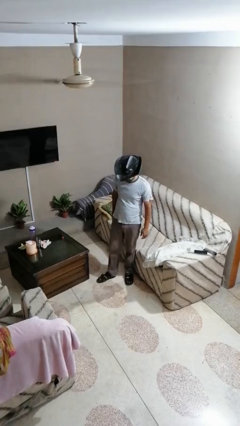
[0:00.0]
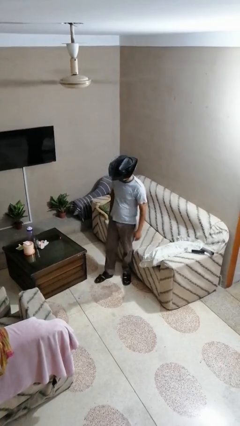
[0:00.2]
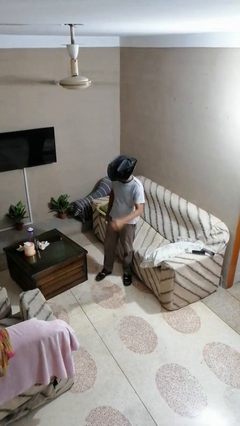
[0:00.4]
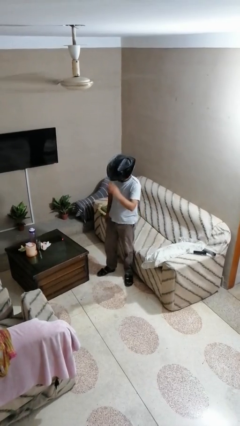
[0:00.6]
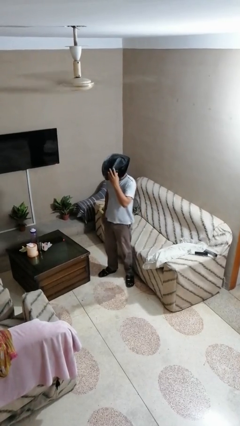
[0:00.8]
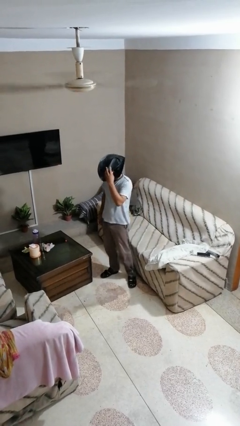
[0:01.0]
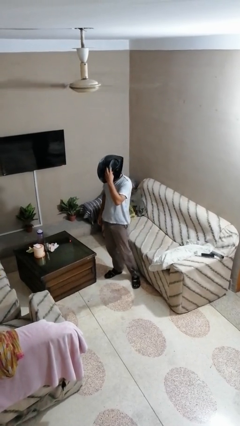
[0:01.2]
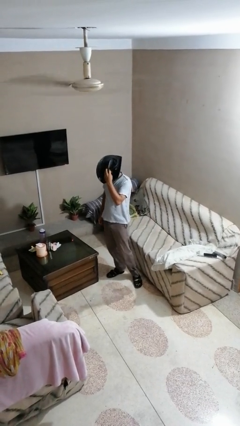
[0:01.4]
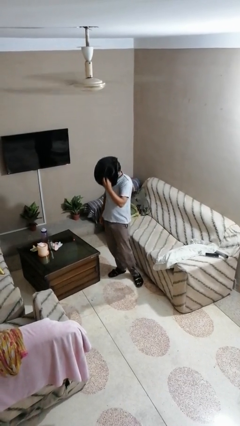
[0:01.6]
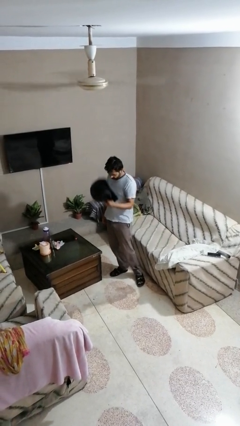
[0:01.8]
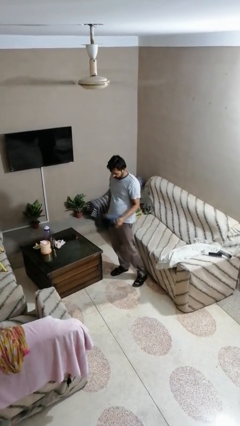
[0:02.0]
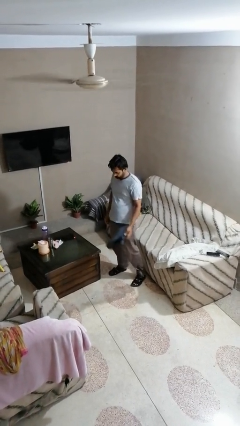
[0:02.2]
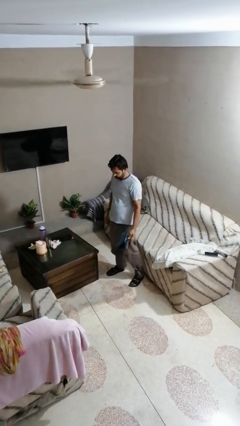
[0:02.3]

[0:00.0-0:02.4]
person takes off hat

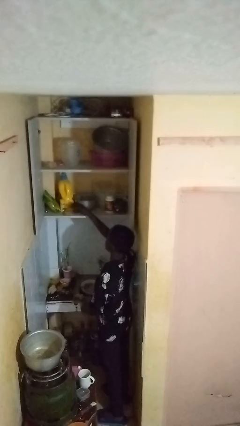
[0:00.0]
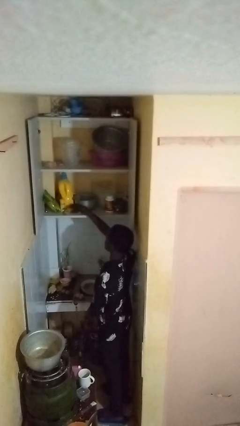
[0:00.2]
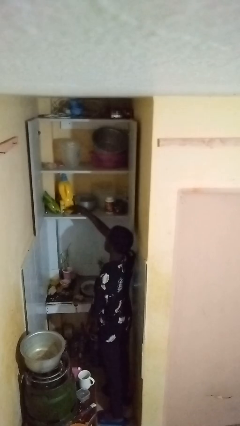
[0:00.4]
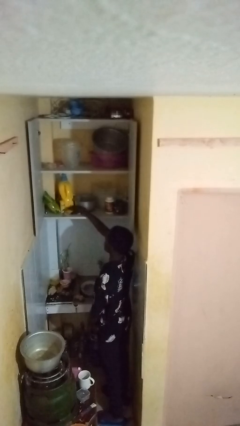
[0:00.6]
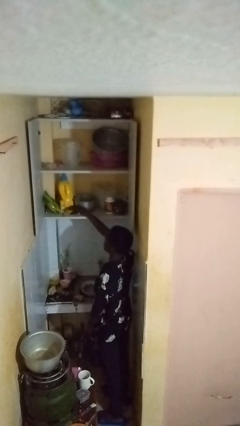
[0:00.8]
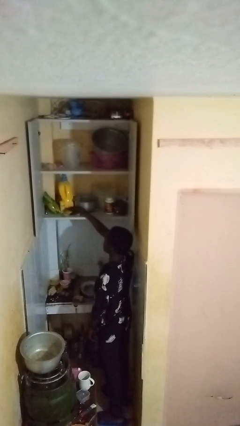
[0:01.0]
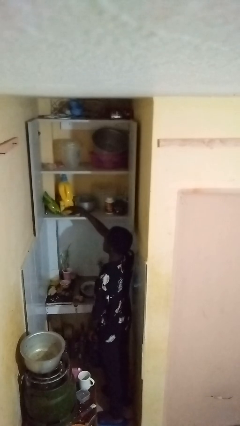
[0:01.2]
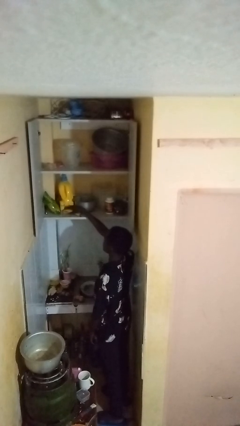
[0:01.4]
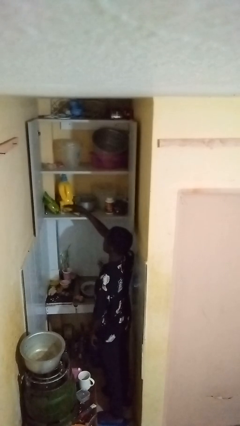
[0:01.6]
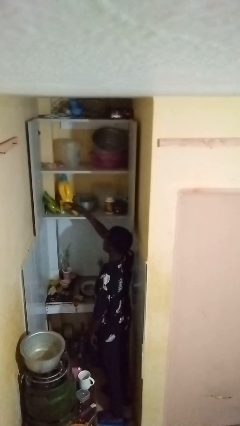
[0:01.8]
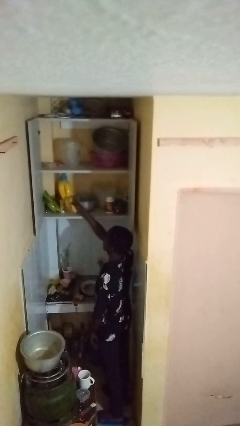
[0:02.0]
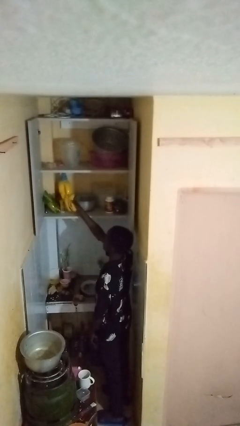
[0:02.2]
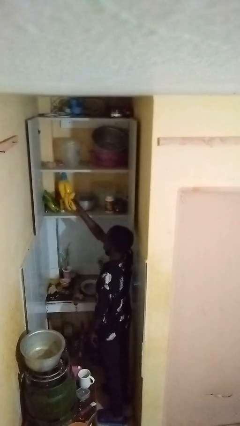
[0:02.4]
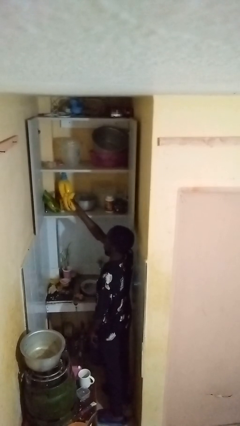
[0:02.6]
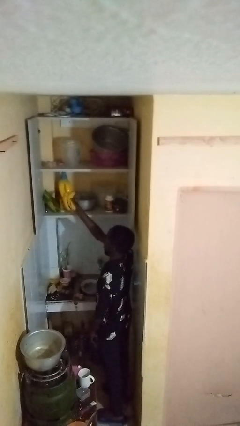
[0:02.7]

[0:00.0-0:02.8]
person takes object from cabinet

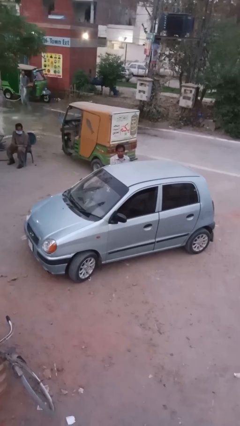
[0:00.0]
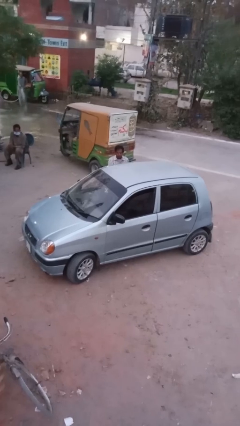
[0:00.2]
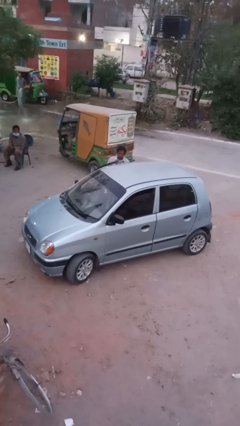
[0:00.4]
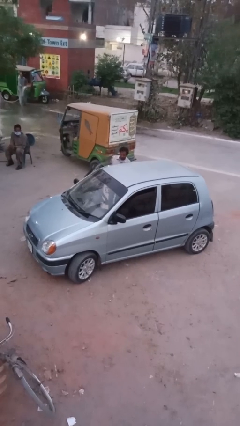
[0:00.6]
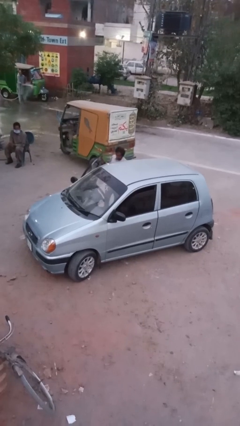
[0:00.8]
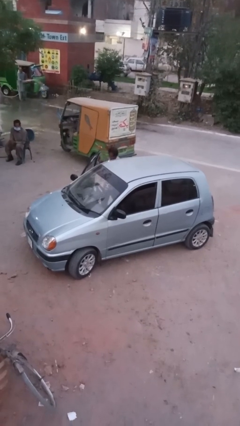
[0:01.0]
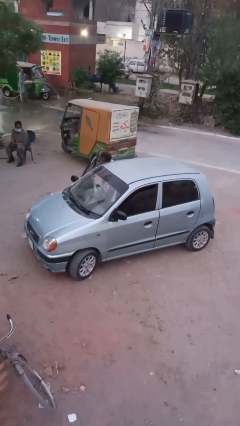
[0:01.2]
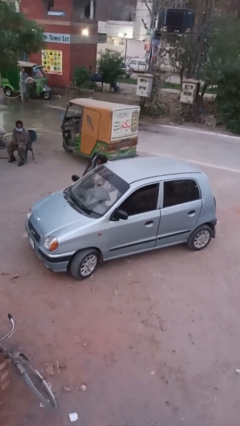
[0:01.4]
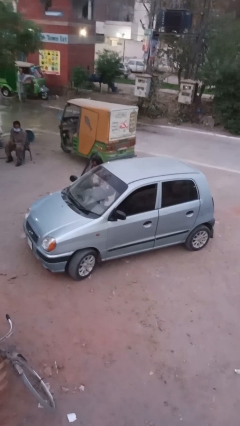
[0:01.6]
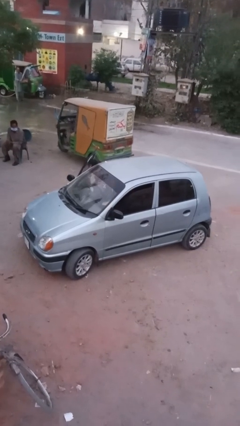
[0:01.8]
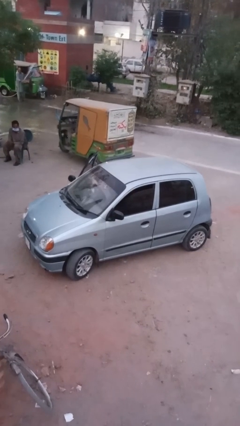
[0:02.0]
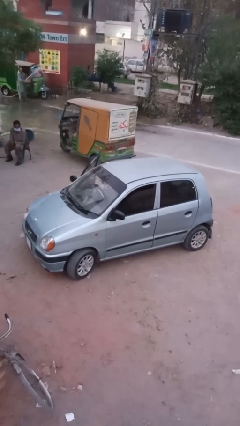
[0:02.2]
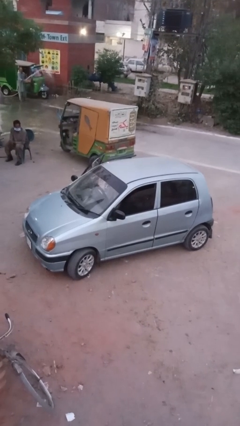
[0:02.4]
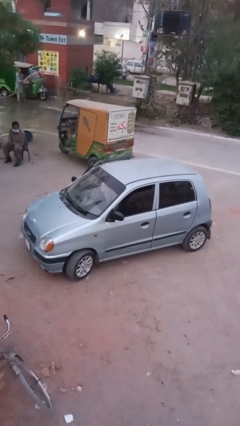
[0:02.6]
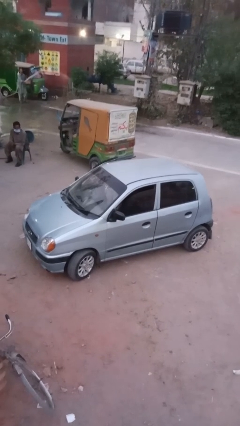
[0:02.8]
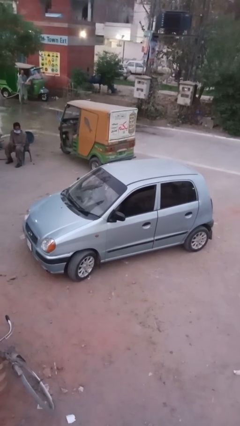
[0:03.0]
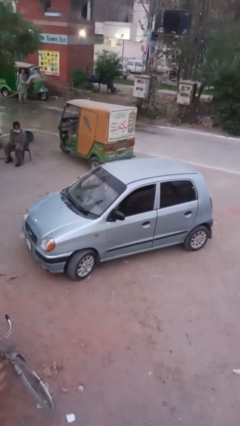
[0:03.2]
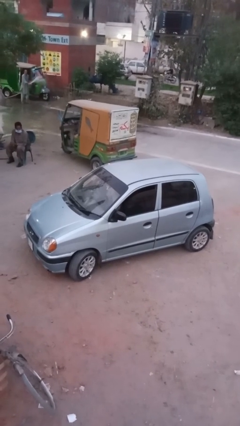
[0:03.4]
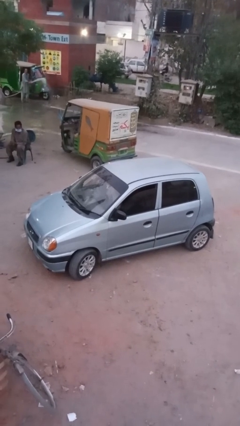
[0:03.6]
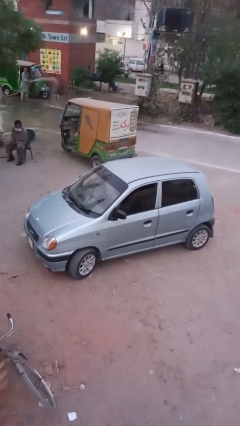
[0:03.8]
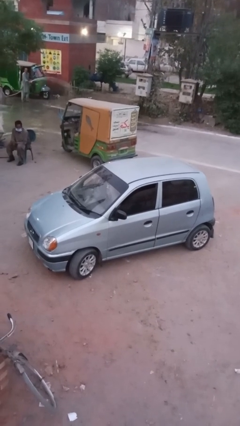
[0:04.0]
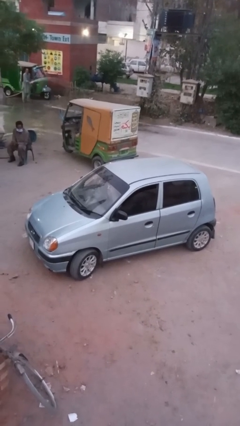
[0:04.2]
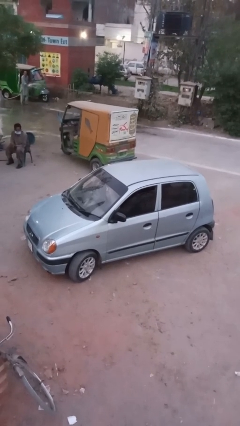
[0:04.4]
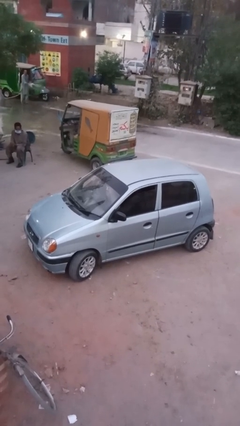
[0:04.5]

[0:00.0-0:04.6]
person opens facility door

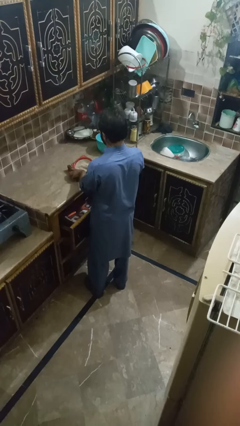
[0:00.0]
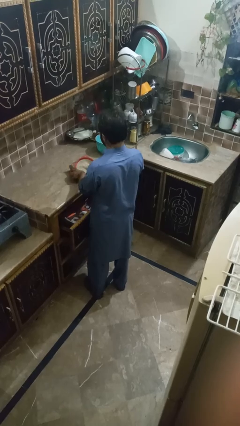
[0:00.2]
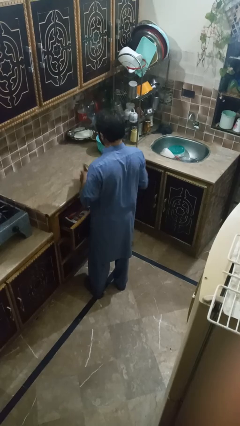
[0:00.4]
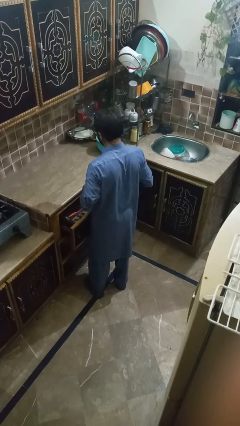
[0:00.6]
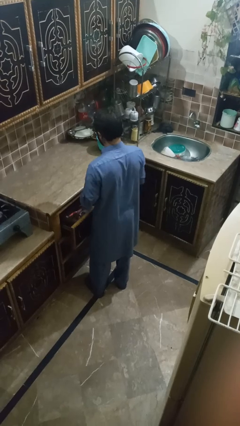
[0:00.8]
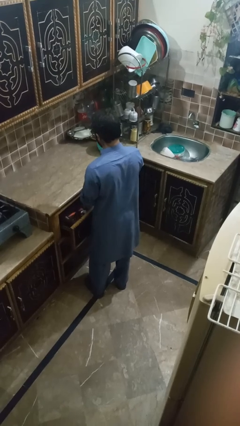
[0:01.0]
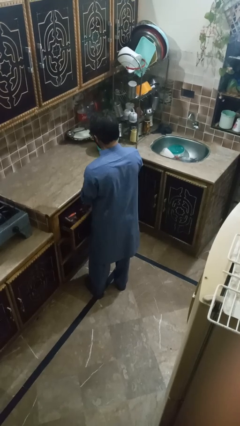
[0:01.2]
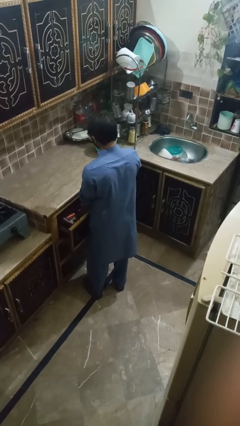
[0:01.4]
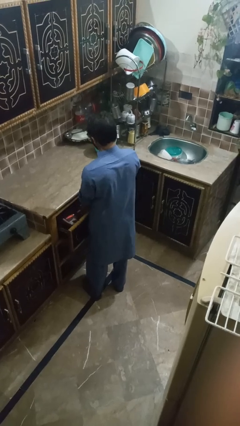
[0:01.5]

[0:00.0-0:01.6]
person puts object into kitchen drawer

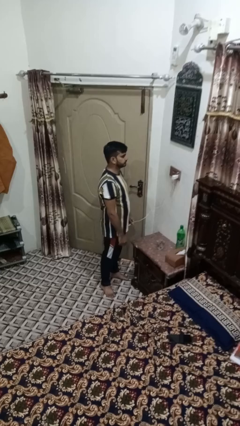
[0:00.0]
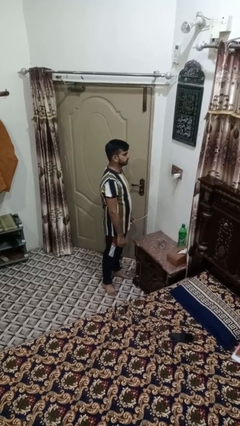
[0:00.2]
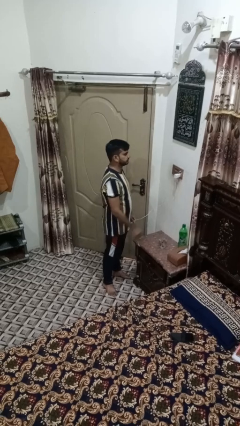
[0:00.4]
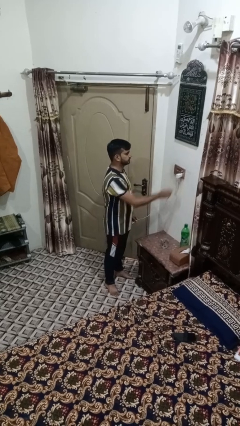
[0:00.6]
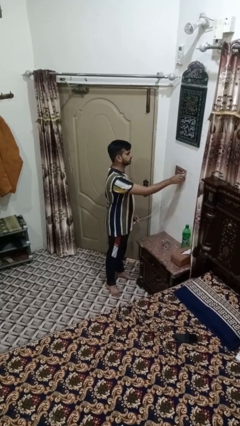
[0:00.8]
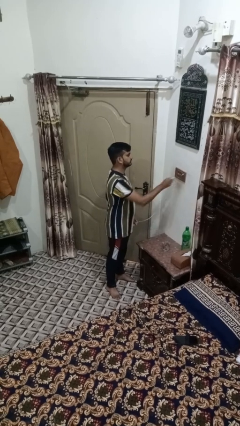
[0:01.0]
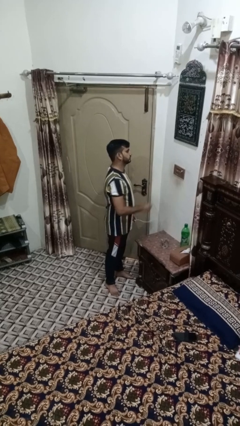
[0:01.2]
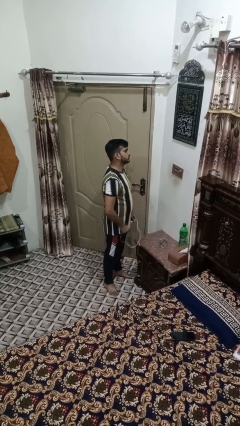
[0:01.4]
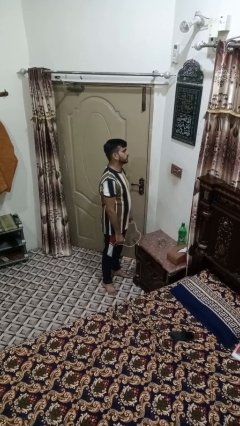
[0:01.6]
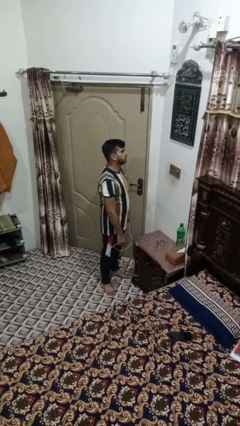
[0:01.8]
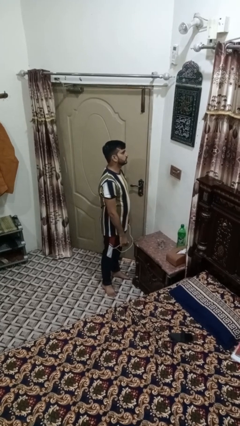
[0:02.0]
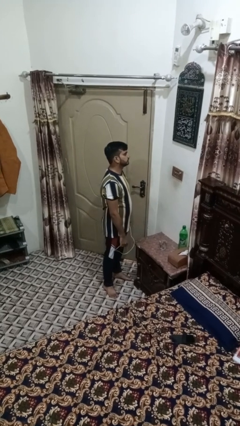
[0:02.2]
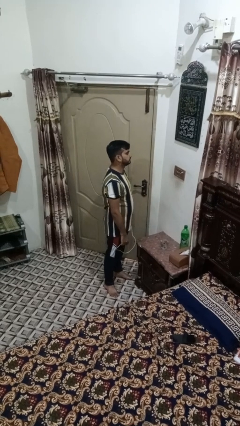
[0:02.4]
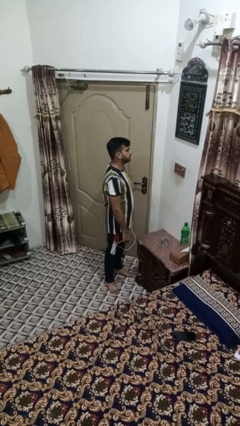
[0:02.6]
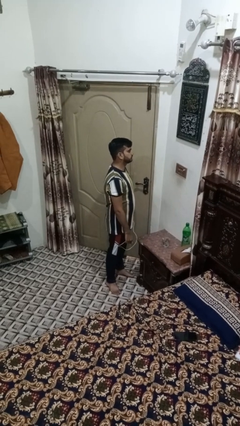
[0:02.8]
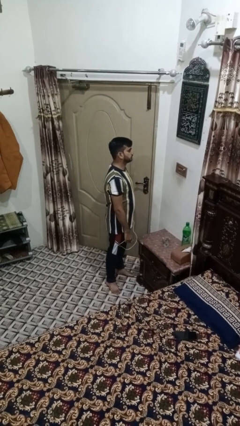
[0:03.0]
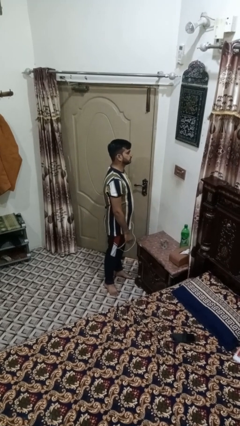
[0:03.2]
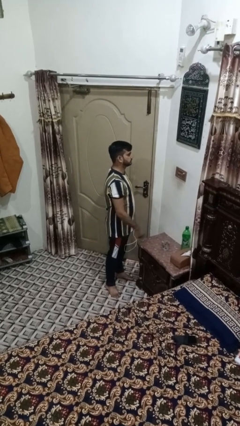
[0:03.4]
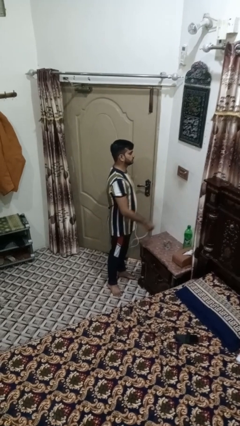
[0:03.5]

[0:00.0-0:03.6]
person unplugs from electrical socket

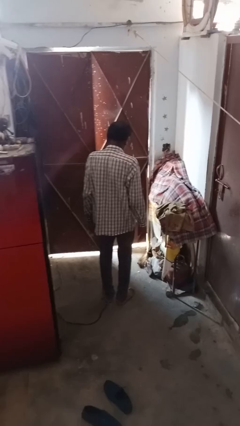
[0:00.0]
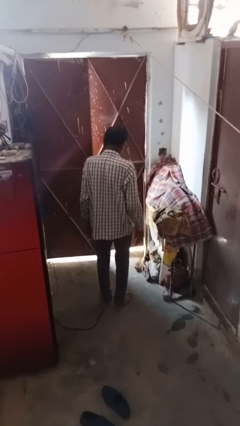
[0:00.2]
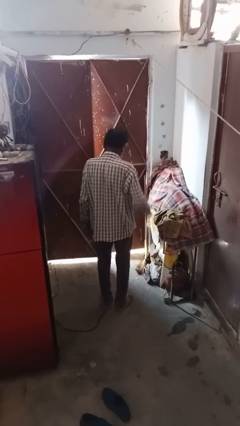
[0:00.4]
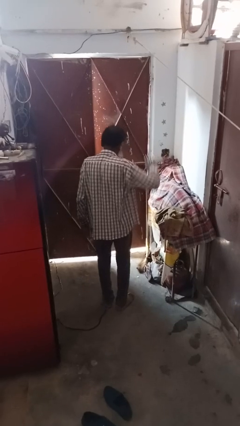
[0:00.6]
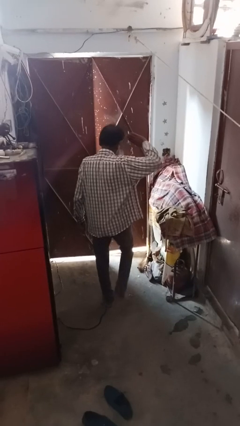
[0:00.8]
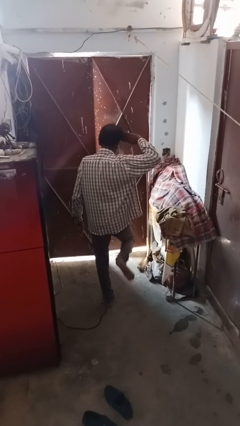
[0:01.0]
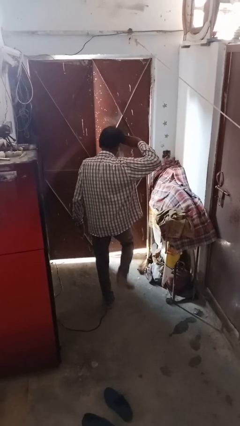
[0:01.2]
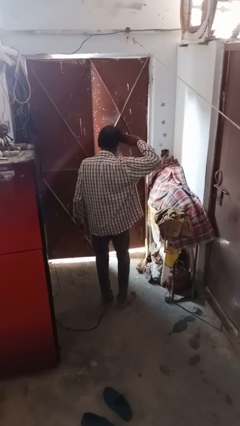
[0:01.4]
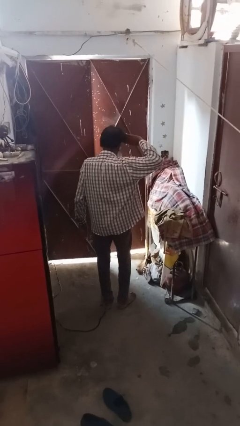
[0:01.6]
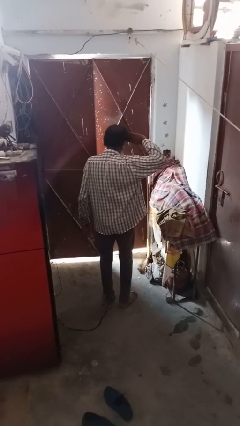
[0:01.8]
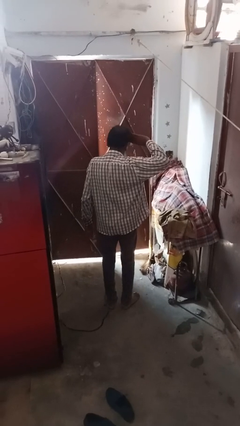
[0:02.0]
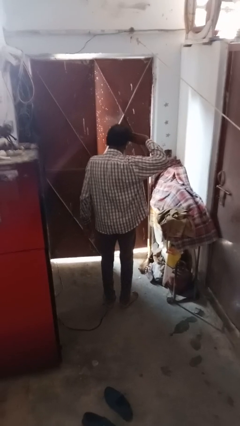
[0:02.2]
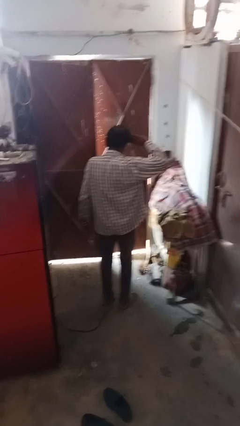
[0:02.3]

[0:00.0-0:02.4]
person salutes
